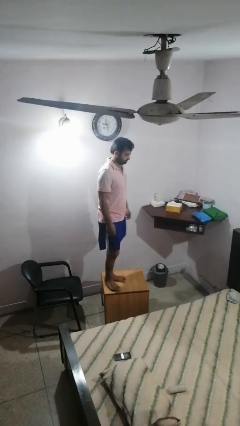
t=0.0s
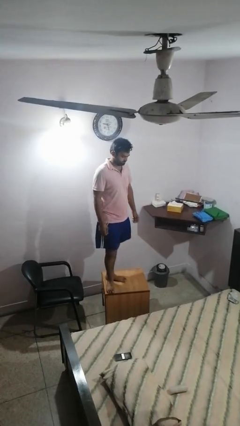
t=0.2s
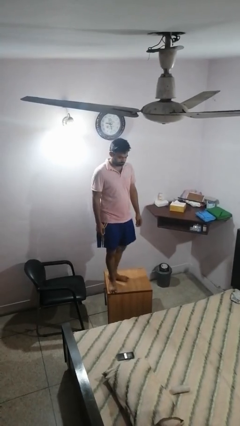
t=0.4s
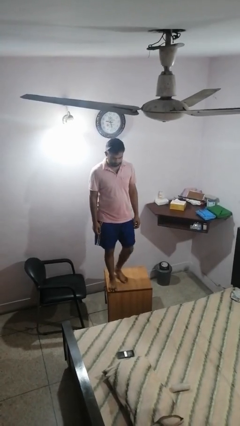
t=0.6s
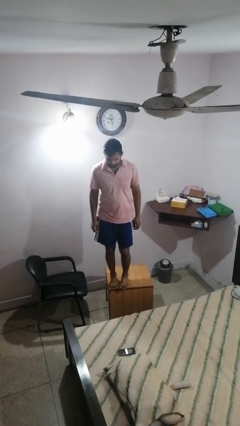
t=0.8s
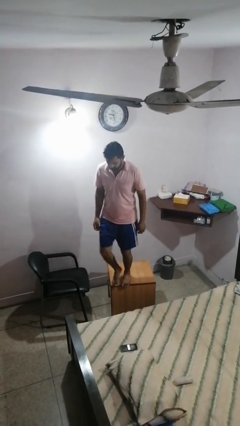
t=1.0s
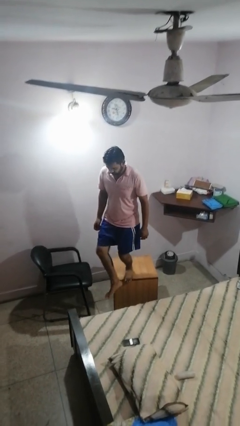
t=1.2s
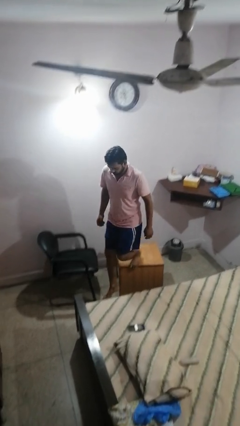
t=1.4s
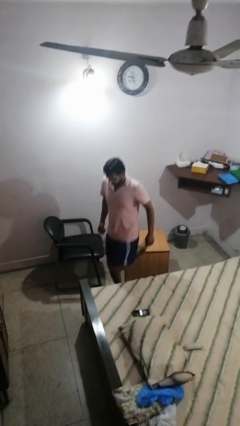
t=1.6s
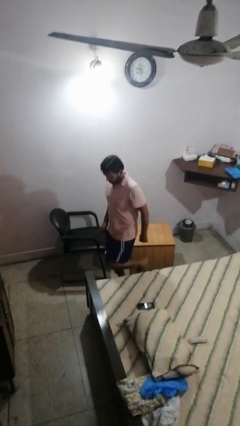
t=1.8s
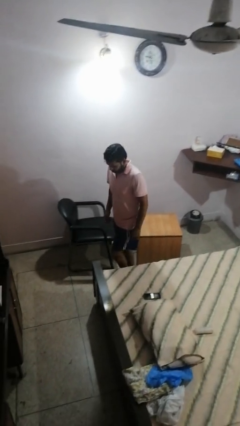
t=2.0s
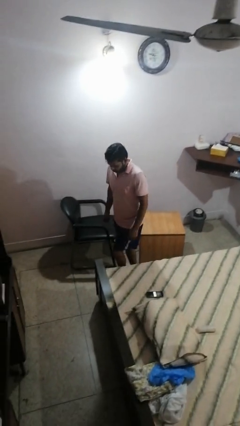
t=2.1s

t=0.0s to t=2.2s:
person climbs off table

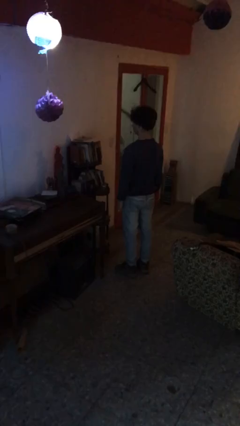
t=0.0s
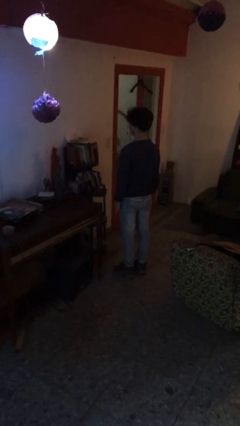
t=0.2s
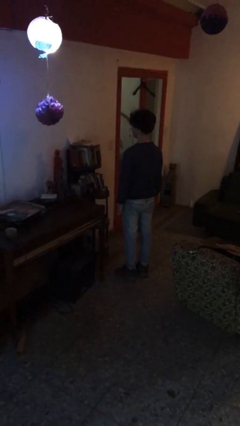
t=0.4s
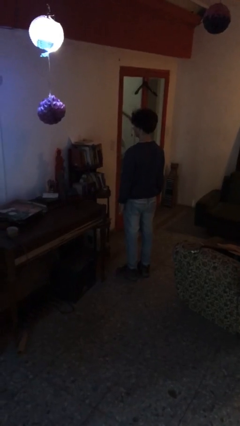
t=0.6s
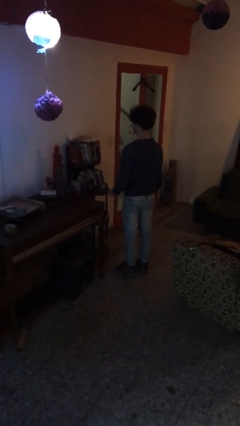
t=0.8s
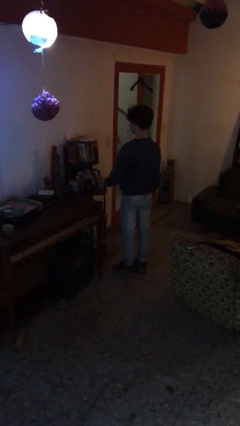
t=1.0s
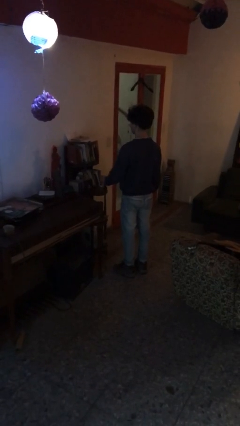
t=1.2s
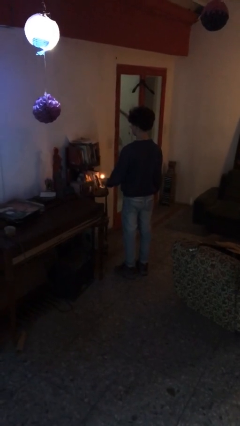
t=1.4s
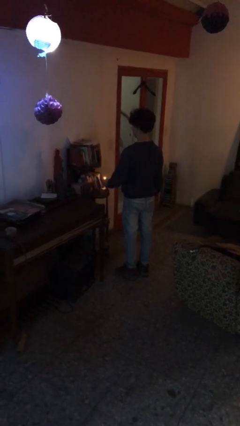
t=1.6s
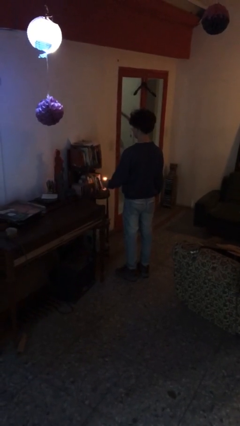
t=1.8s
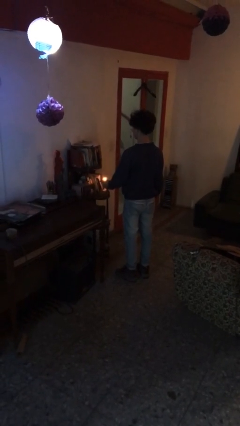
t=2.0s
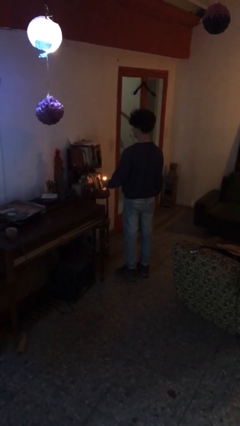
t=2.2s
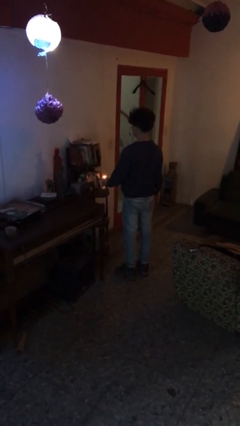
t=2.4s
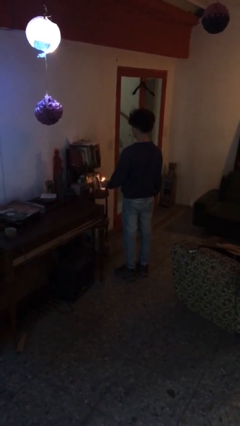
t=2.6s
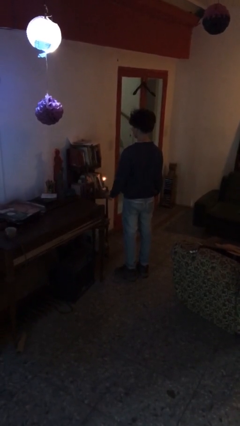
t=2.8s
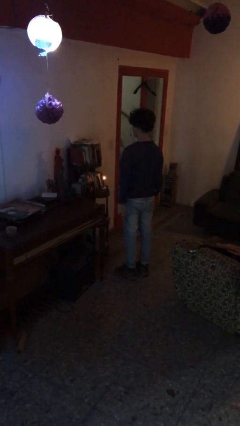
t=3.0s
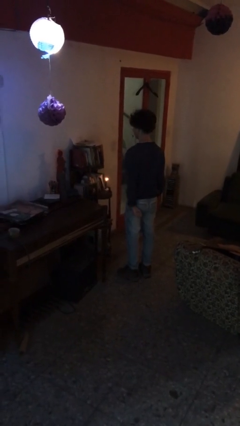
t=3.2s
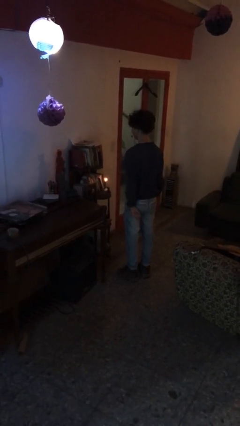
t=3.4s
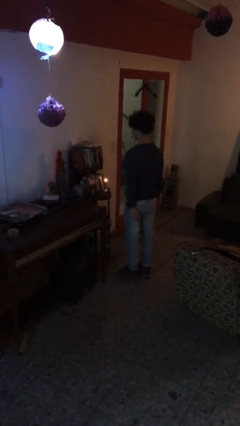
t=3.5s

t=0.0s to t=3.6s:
person lights candle

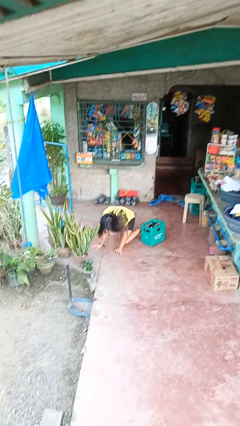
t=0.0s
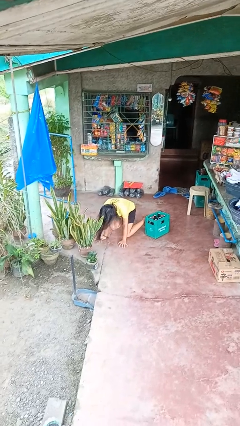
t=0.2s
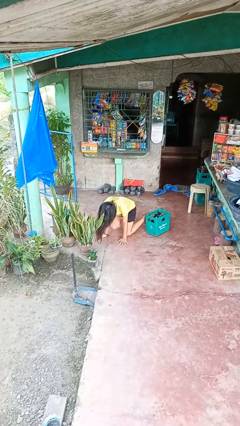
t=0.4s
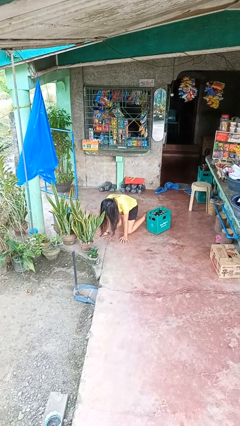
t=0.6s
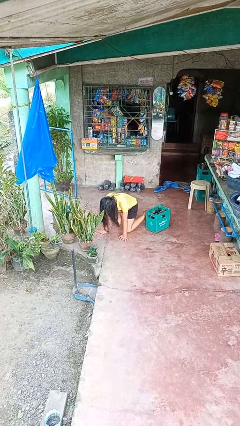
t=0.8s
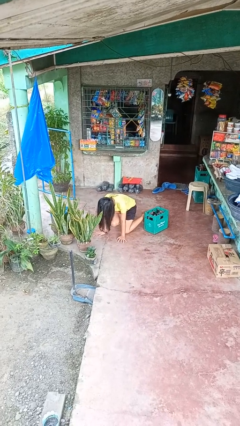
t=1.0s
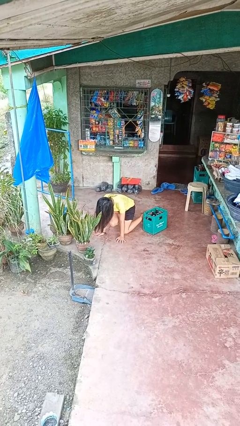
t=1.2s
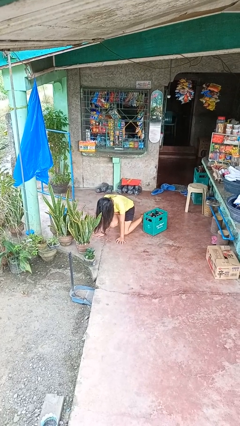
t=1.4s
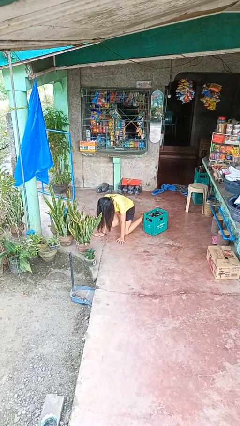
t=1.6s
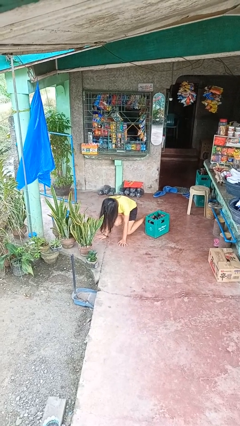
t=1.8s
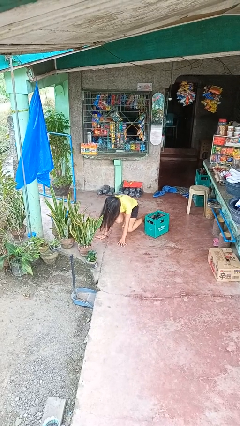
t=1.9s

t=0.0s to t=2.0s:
person lies down on floor

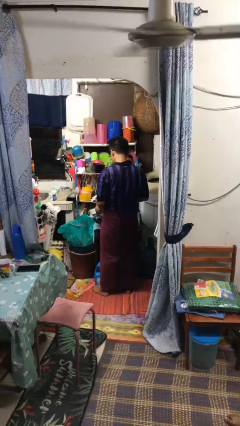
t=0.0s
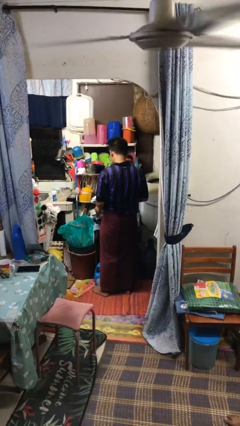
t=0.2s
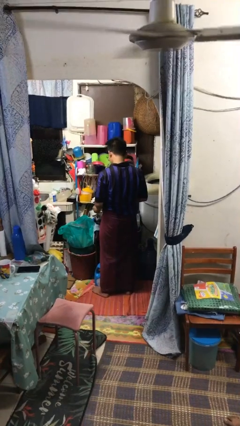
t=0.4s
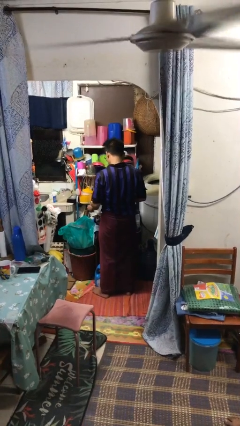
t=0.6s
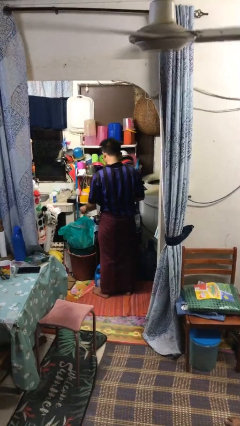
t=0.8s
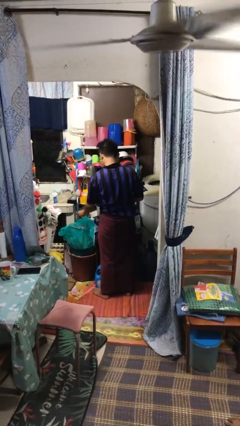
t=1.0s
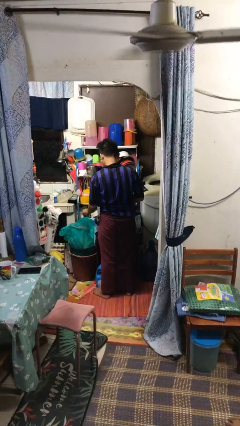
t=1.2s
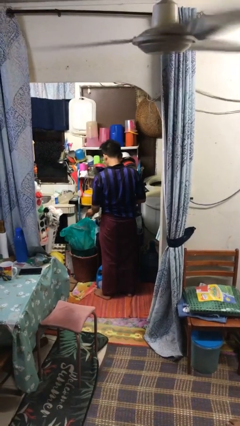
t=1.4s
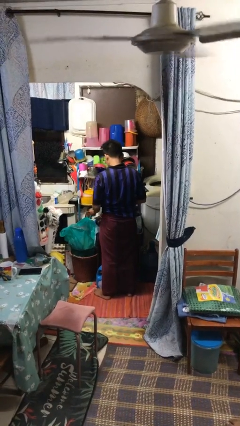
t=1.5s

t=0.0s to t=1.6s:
person discards trash

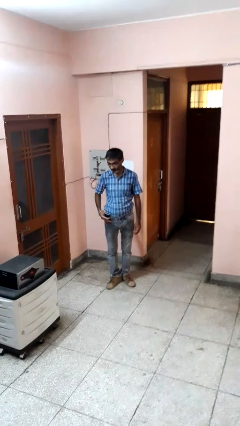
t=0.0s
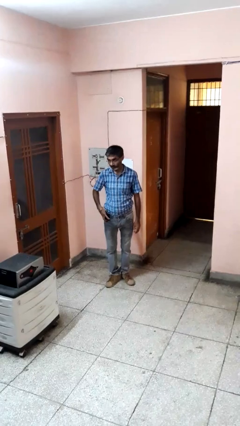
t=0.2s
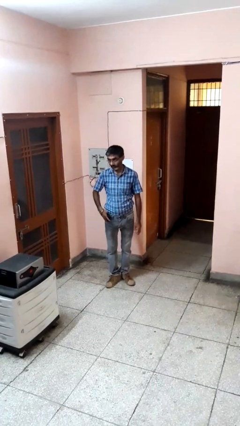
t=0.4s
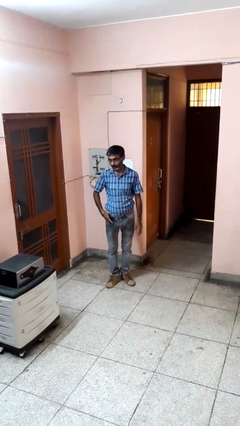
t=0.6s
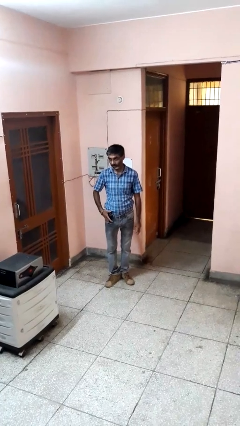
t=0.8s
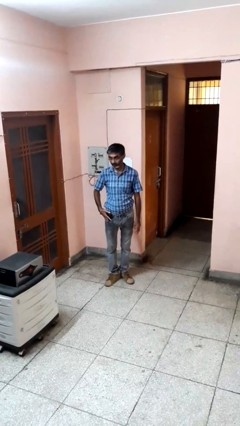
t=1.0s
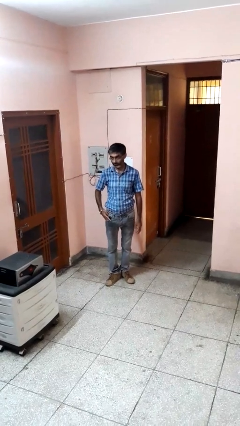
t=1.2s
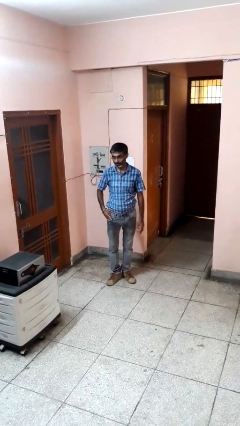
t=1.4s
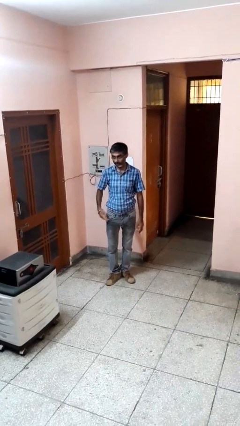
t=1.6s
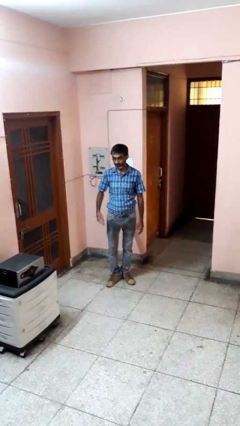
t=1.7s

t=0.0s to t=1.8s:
person puts phone into pocket

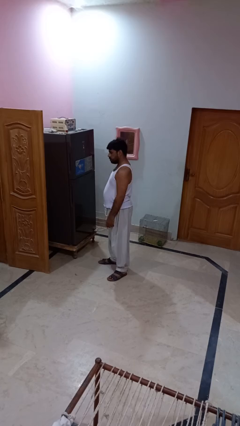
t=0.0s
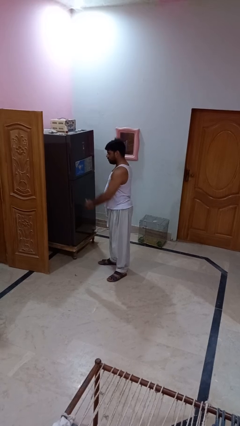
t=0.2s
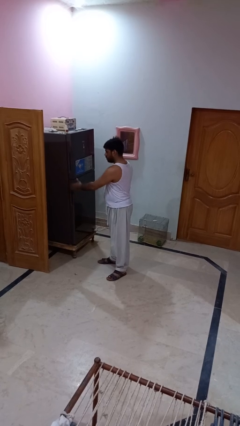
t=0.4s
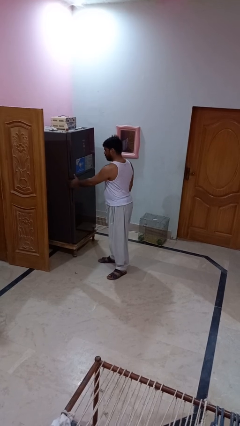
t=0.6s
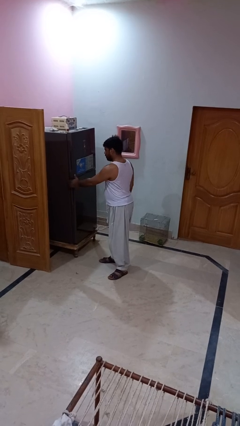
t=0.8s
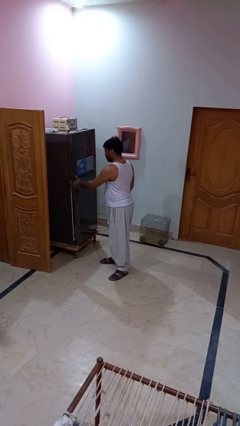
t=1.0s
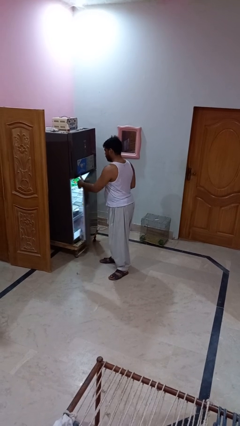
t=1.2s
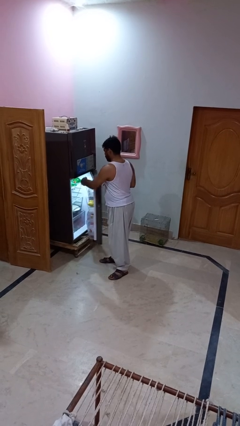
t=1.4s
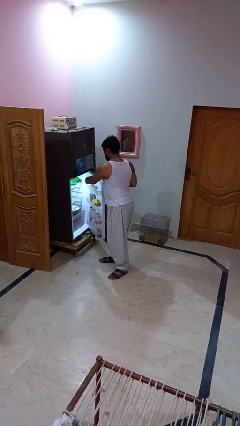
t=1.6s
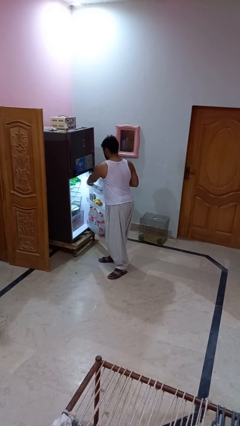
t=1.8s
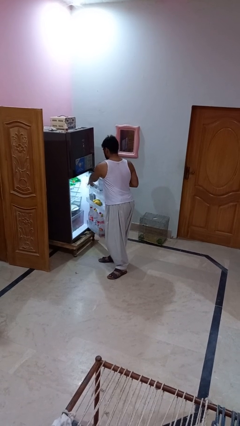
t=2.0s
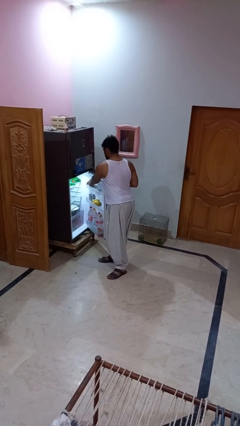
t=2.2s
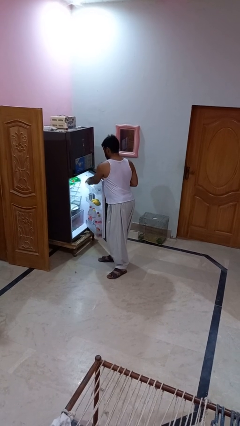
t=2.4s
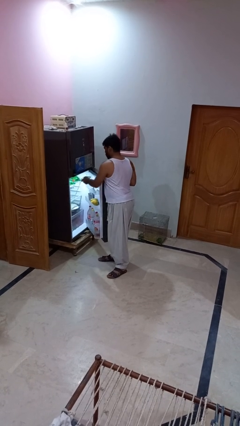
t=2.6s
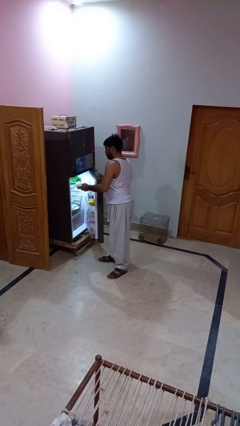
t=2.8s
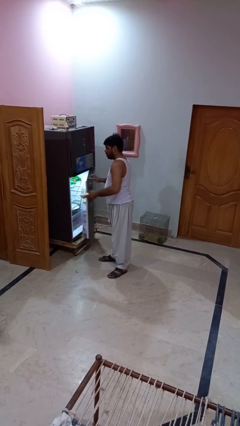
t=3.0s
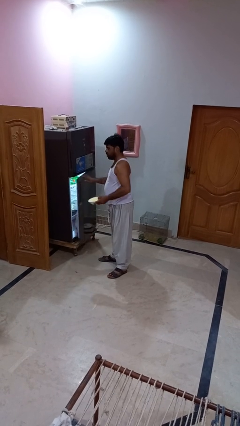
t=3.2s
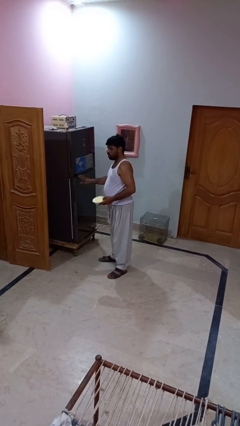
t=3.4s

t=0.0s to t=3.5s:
person takes object from refrigerator

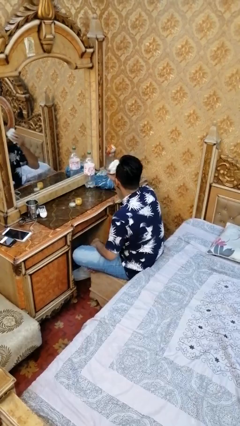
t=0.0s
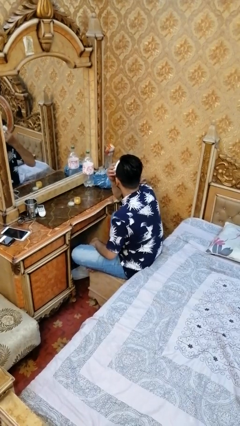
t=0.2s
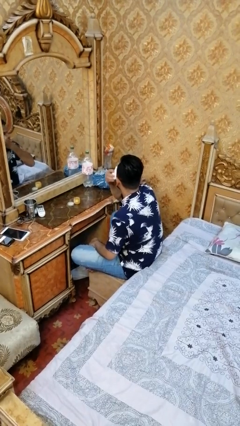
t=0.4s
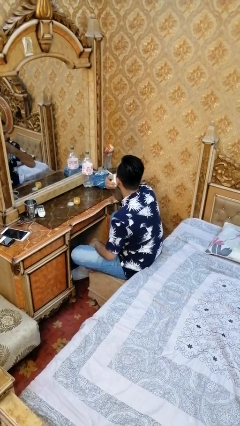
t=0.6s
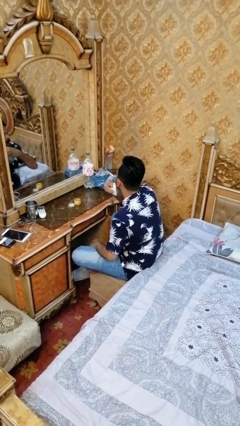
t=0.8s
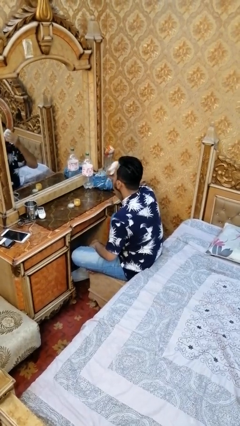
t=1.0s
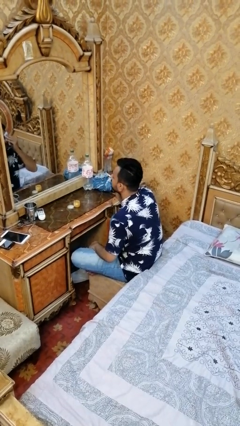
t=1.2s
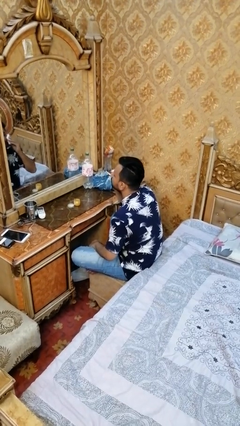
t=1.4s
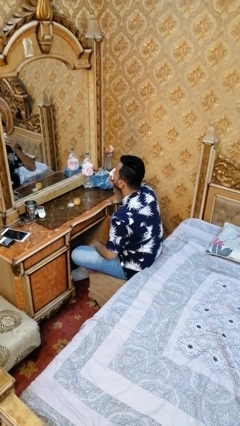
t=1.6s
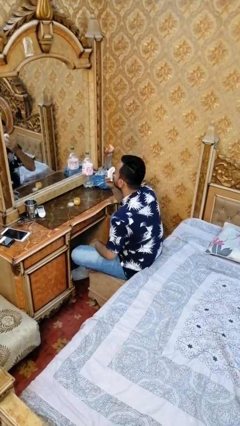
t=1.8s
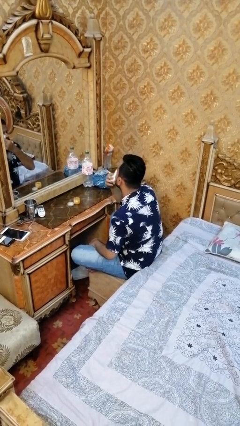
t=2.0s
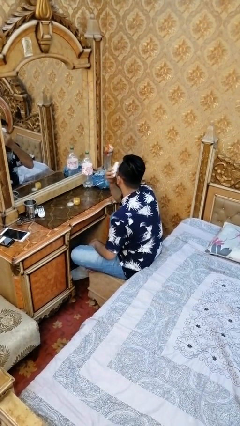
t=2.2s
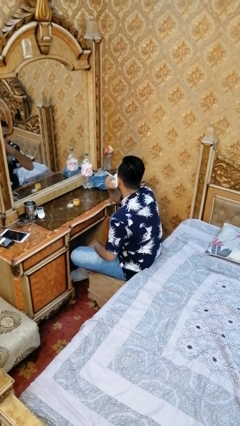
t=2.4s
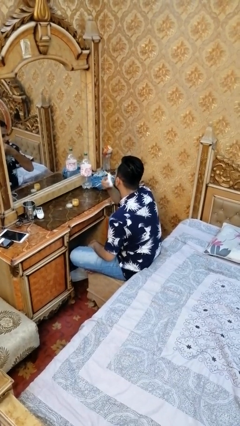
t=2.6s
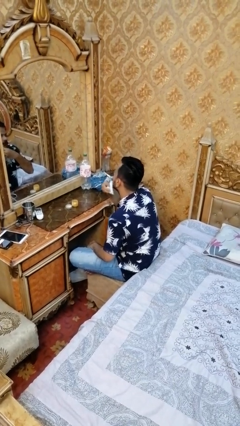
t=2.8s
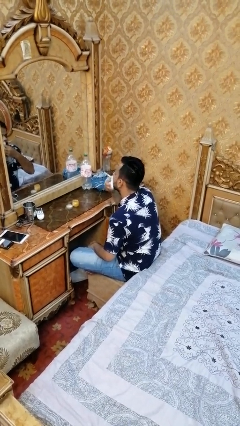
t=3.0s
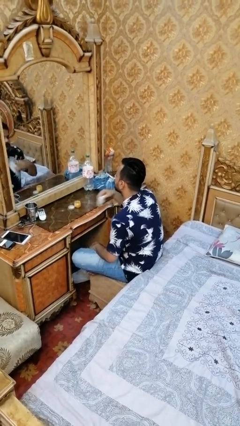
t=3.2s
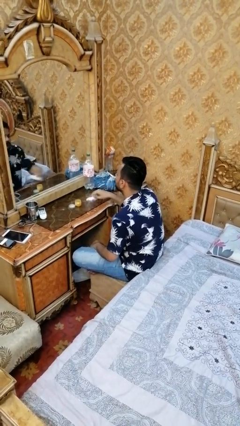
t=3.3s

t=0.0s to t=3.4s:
person takes off facemask
